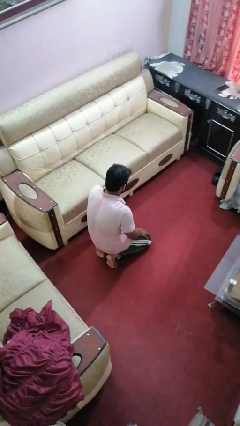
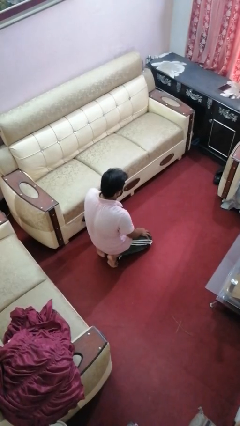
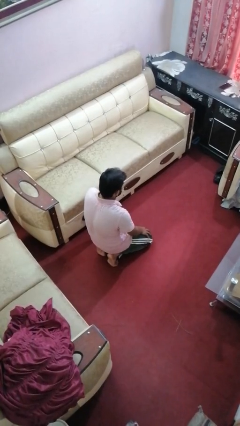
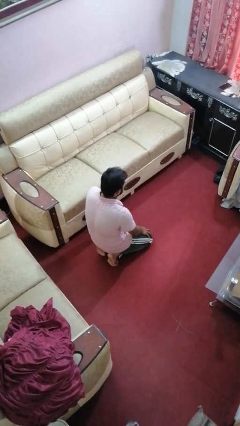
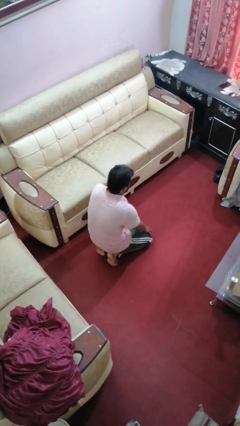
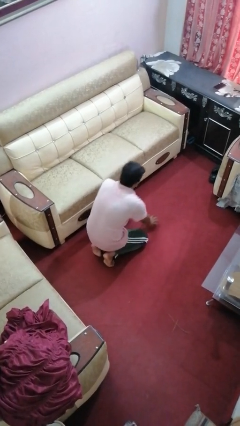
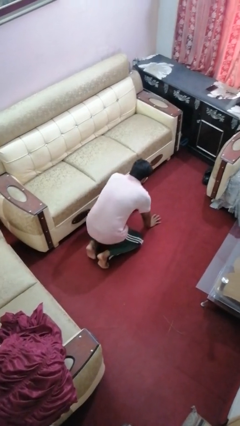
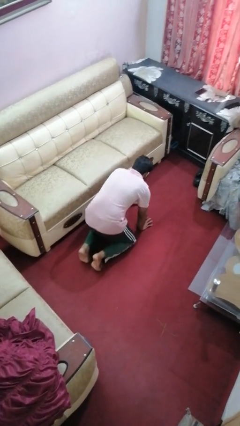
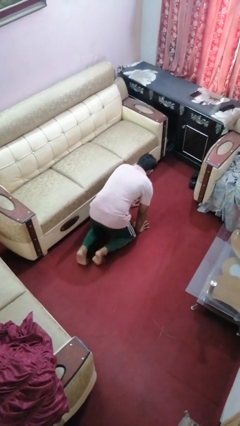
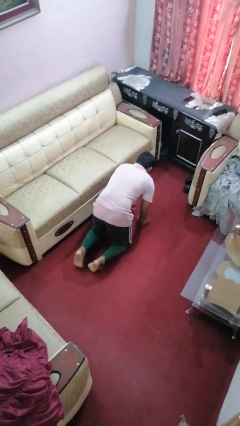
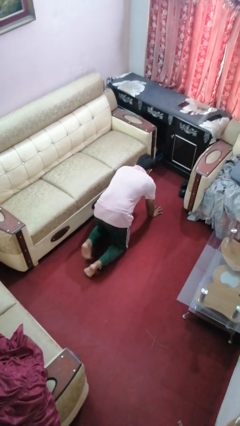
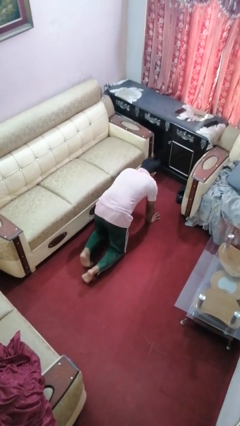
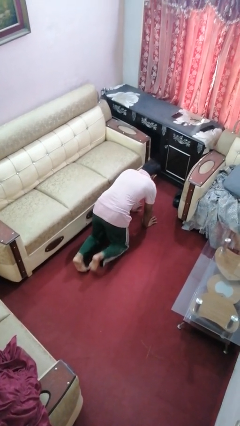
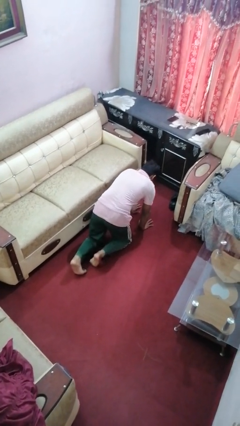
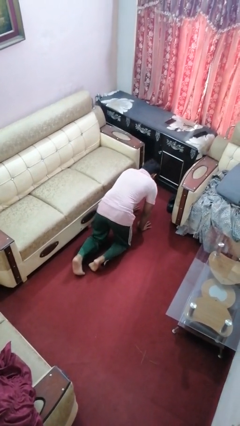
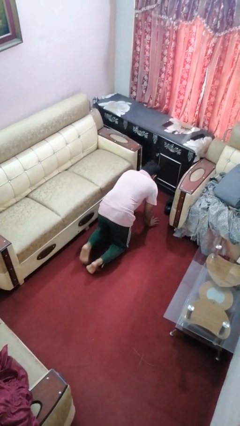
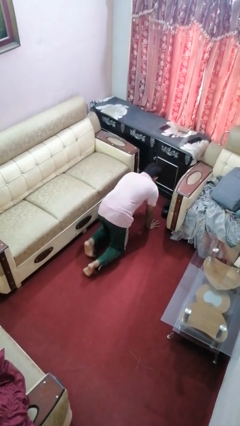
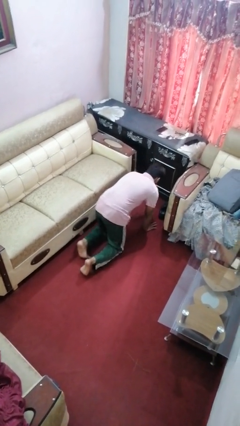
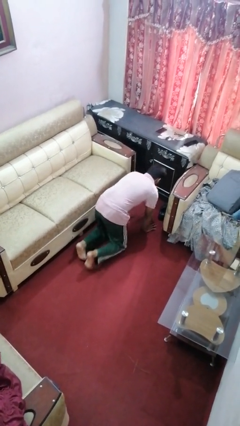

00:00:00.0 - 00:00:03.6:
person crawls

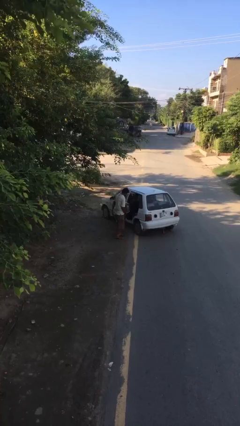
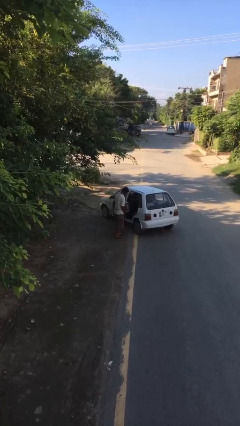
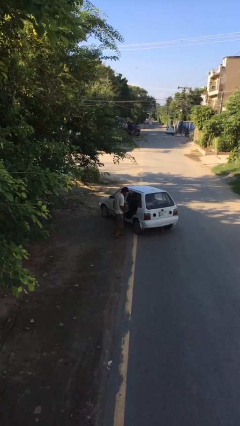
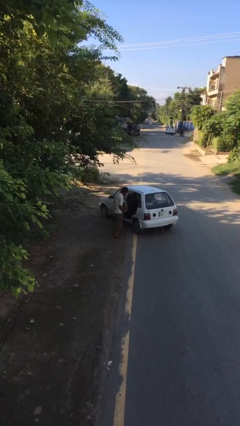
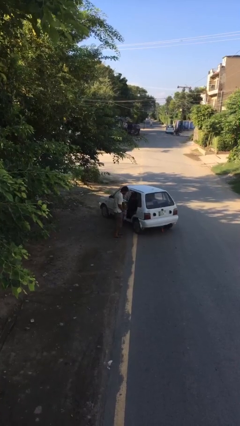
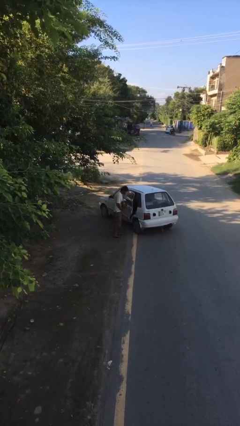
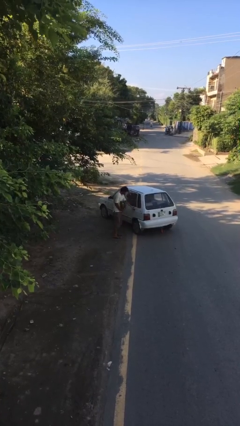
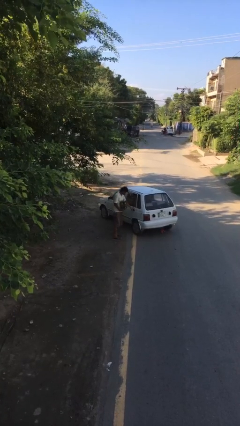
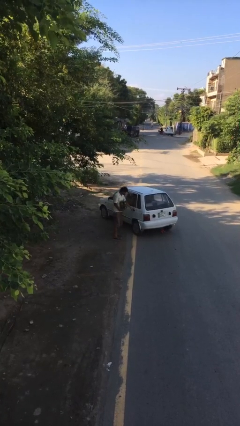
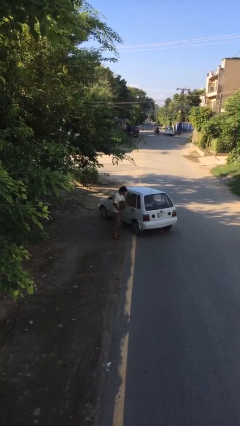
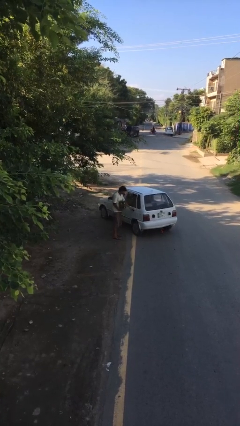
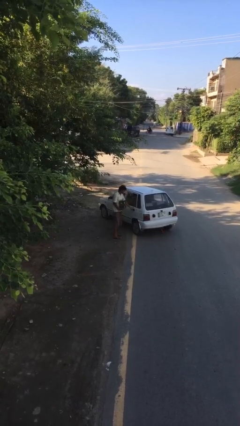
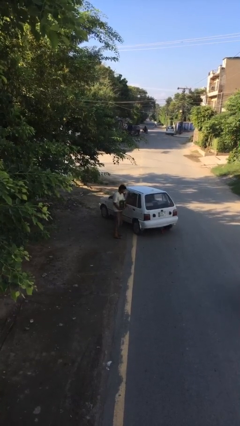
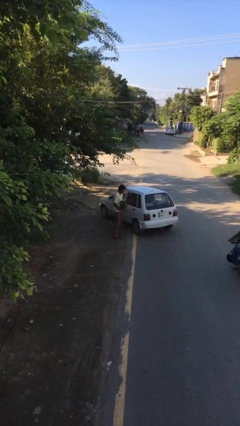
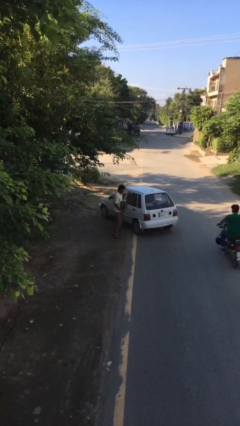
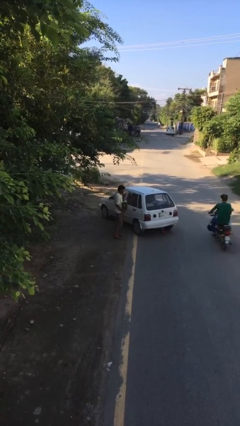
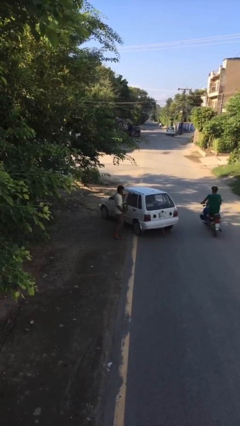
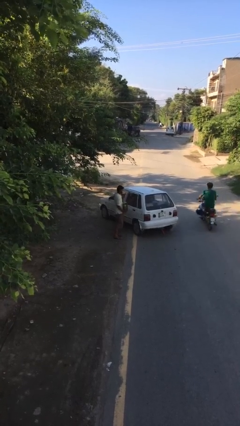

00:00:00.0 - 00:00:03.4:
person closes car door

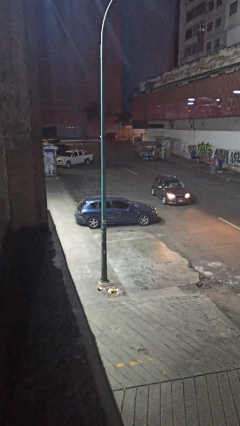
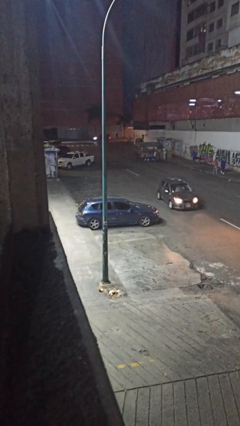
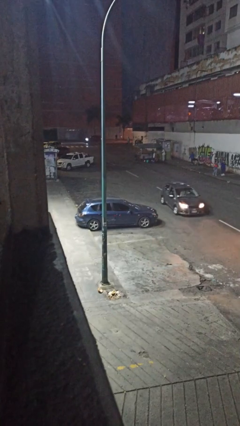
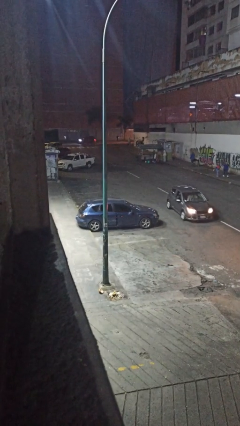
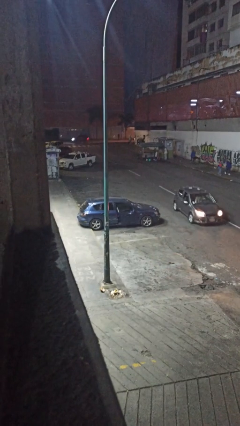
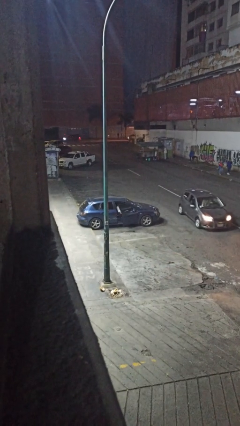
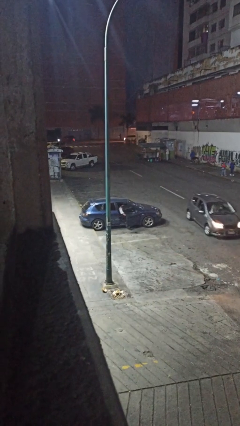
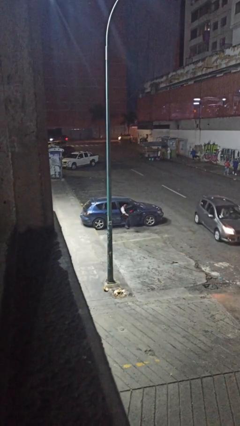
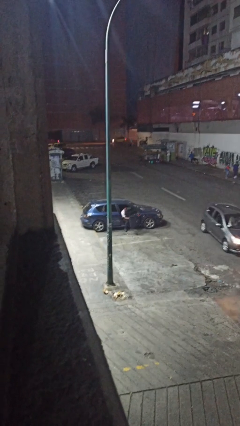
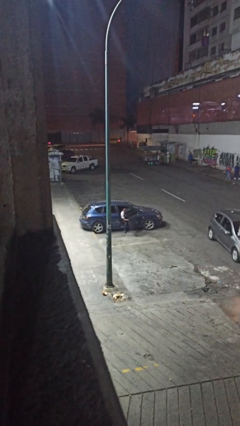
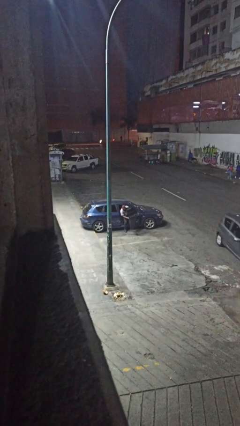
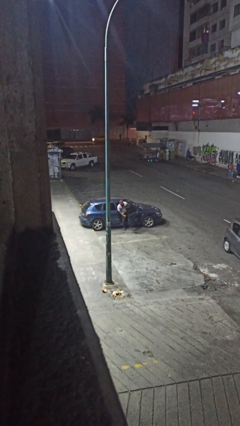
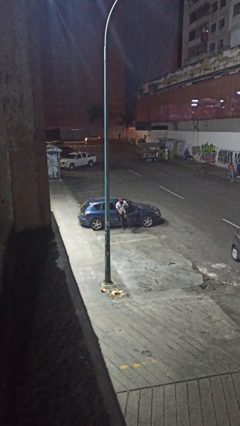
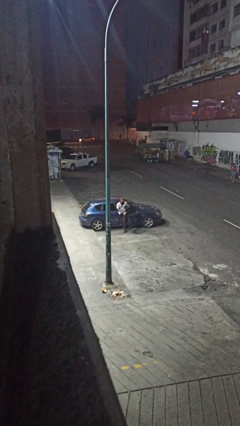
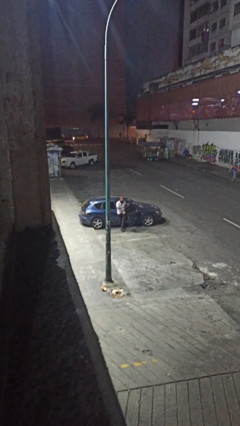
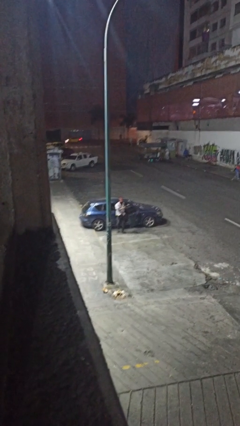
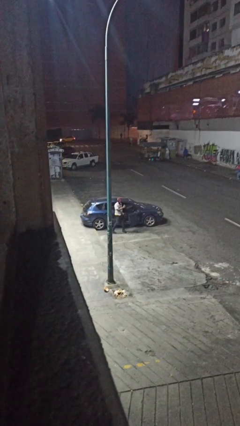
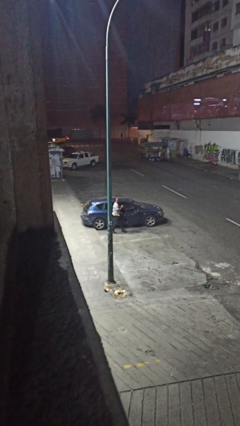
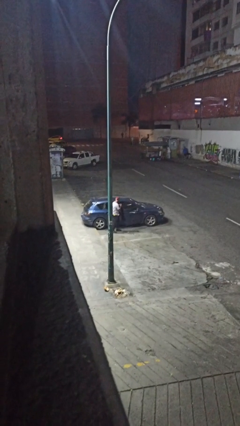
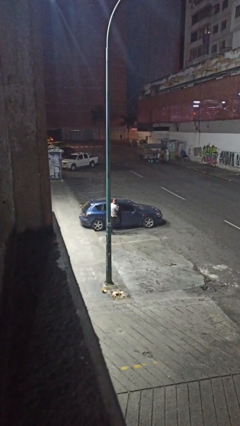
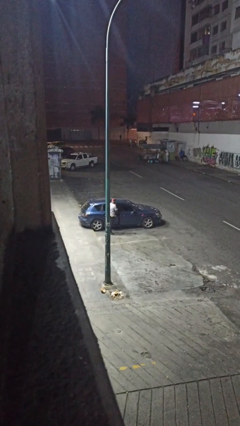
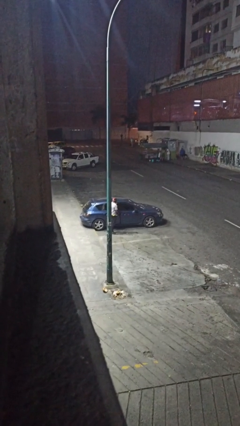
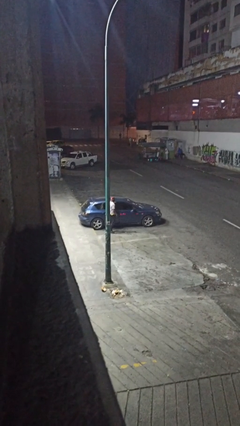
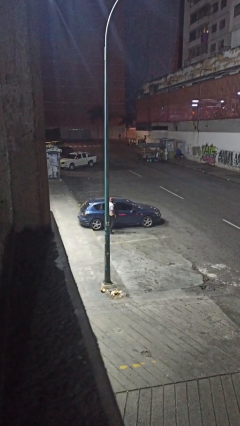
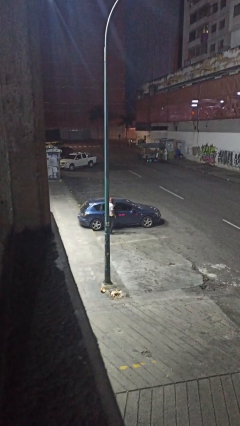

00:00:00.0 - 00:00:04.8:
car drops off person

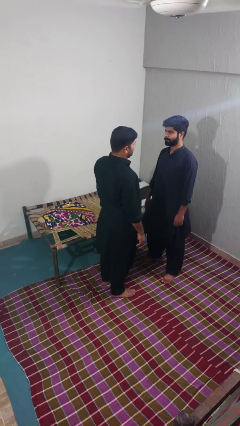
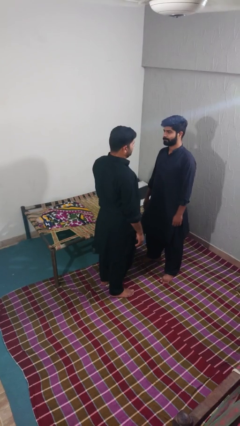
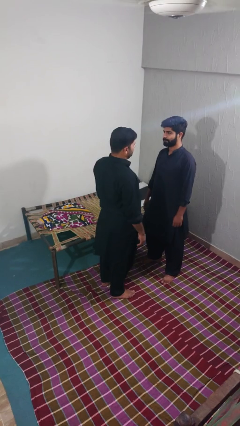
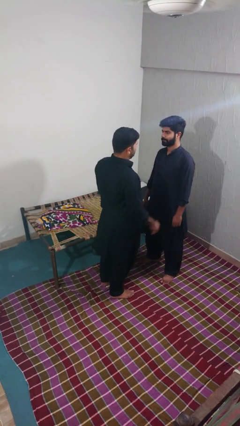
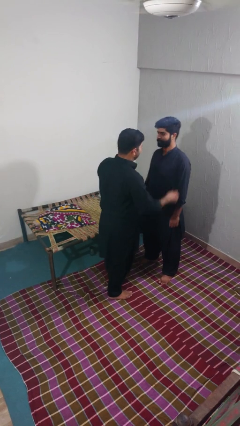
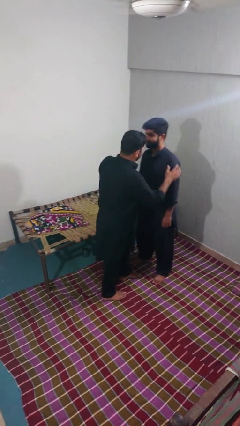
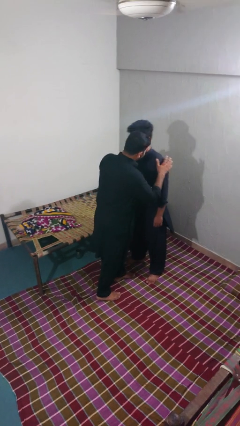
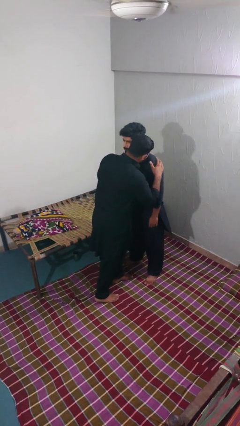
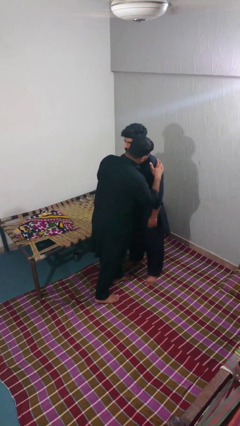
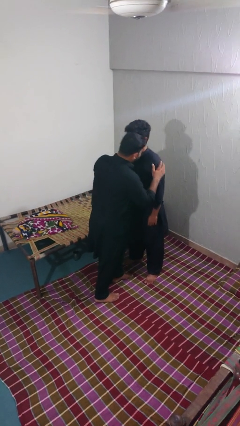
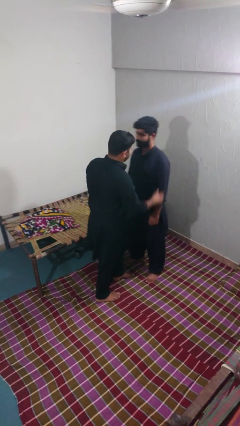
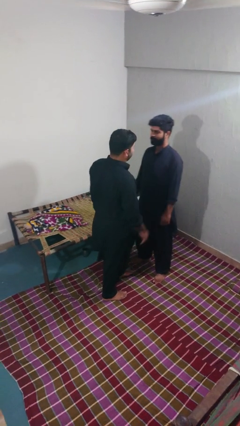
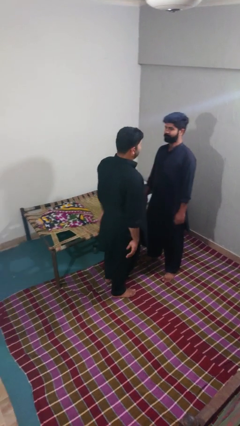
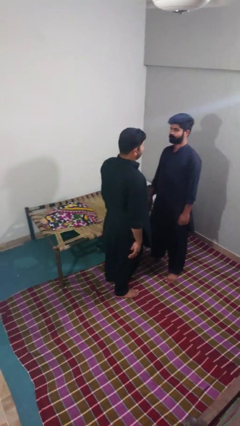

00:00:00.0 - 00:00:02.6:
person kisses cheek of person

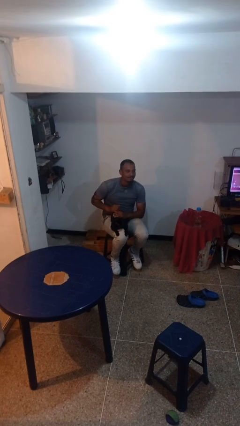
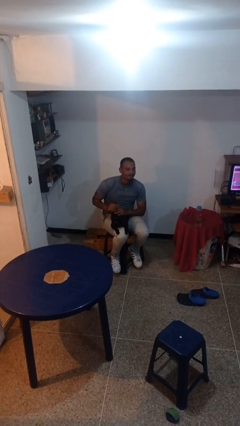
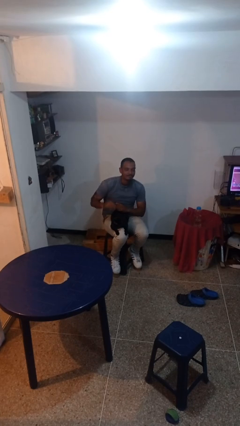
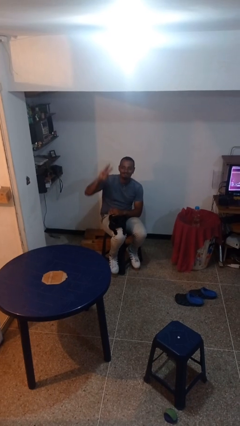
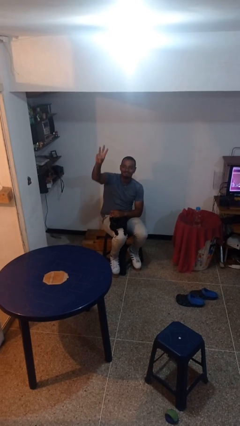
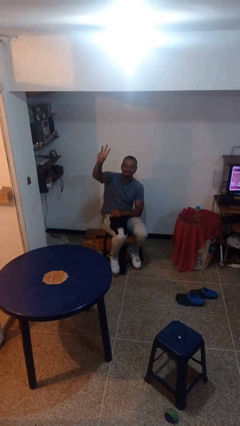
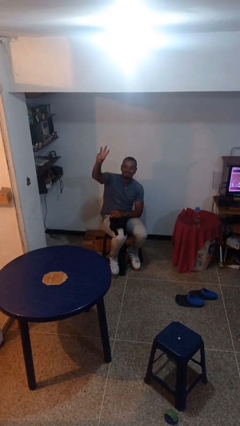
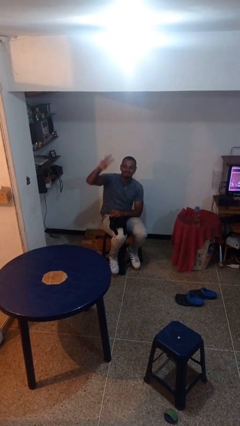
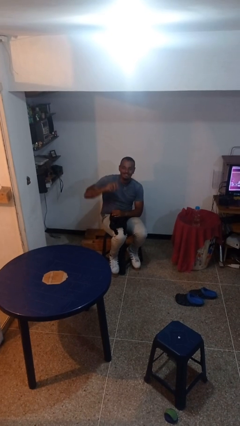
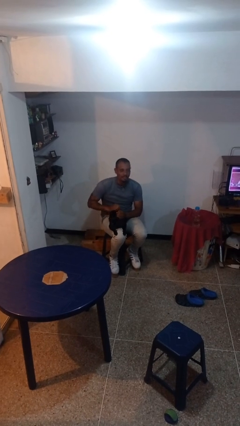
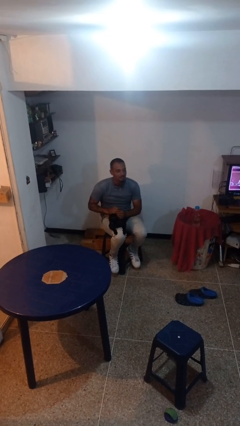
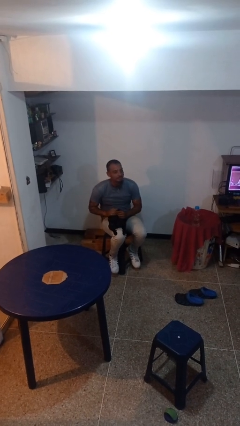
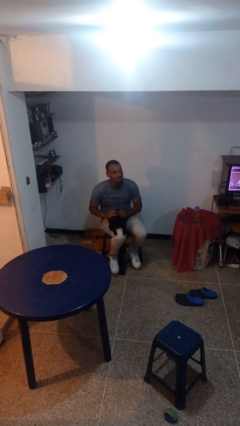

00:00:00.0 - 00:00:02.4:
person gestures number three

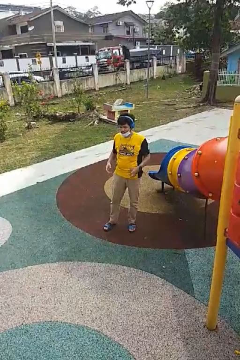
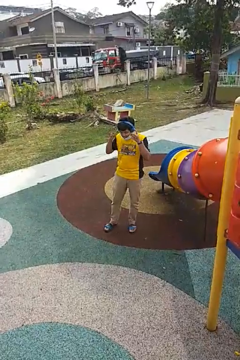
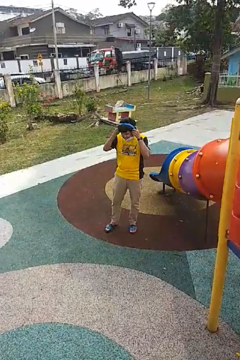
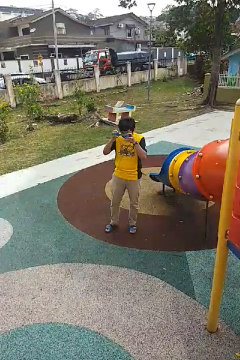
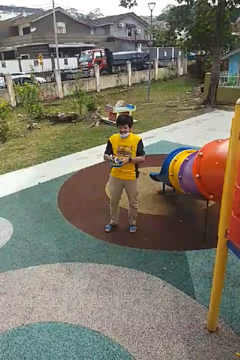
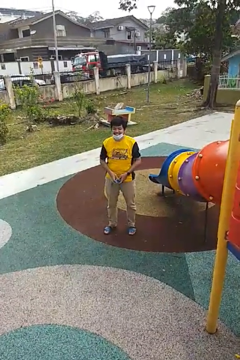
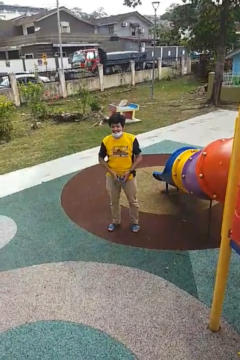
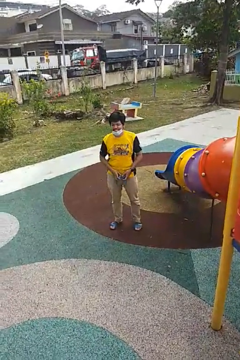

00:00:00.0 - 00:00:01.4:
person takes off headphones
